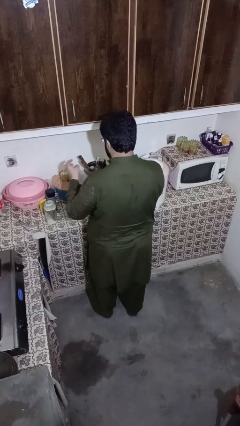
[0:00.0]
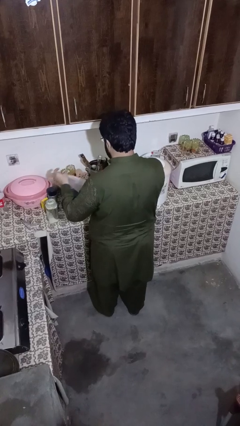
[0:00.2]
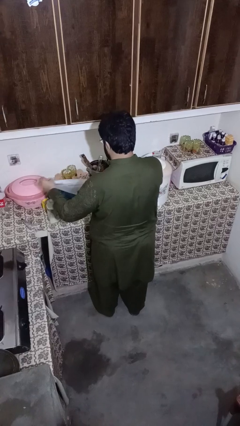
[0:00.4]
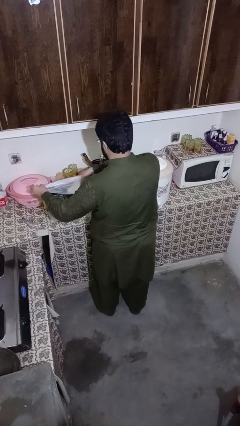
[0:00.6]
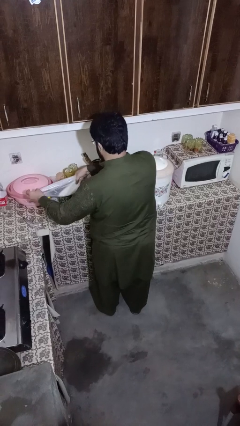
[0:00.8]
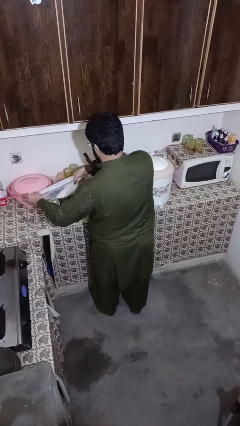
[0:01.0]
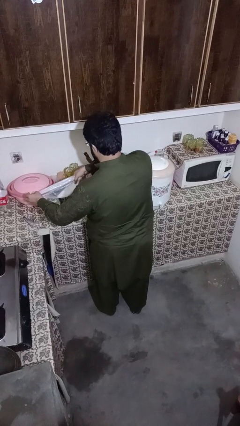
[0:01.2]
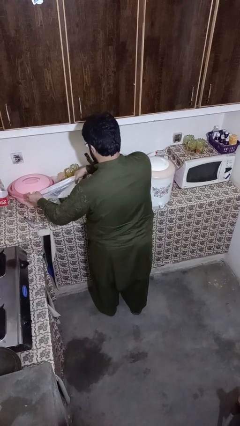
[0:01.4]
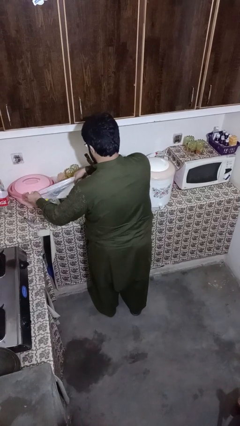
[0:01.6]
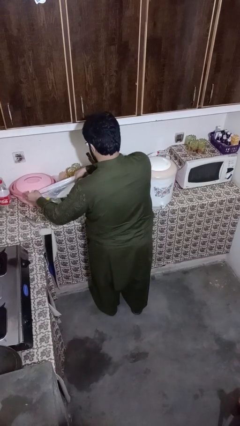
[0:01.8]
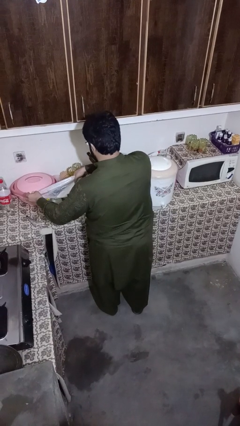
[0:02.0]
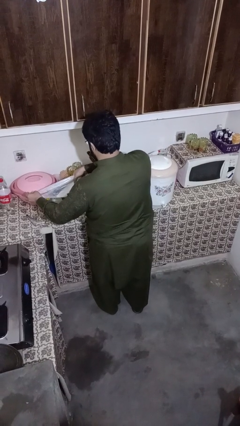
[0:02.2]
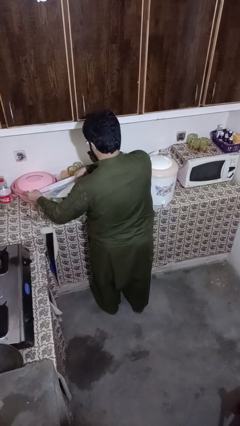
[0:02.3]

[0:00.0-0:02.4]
person pours into bowl

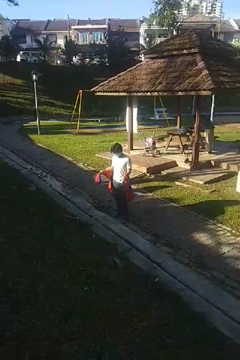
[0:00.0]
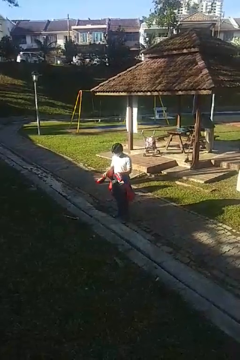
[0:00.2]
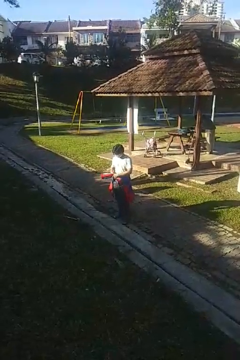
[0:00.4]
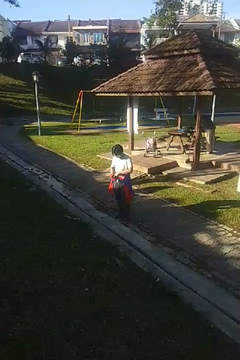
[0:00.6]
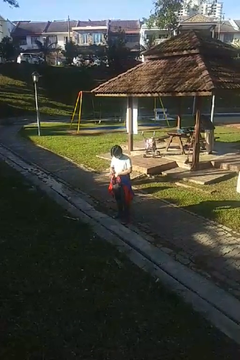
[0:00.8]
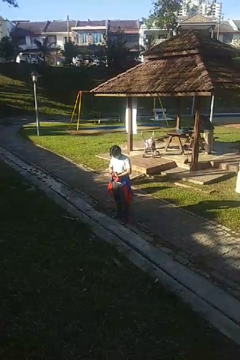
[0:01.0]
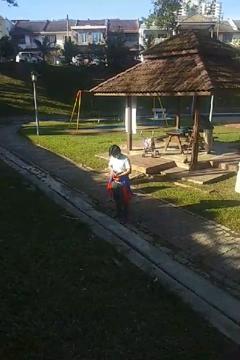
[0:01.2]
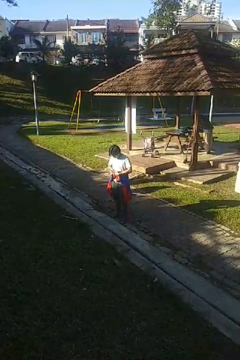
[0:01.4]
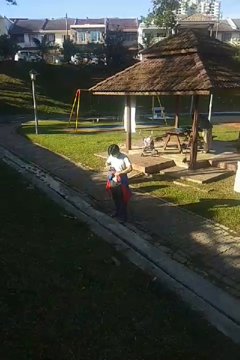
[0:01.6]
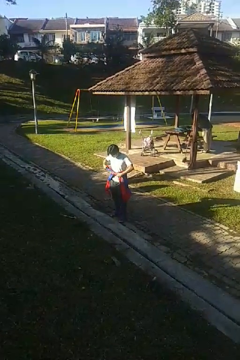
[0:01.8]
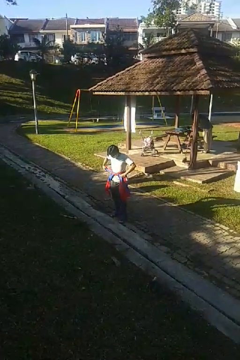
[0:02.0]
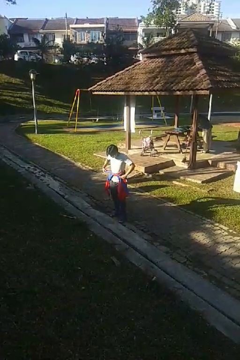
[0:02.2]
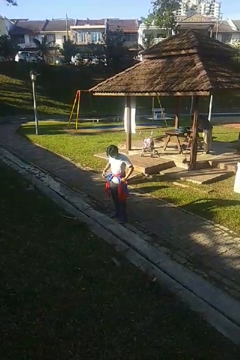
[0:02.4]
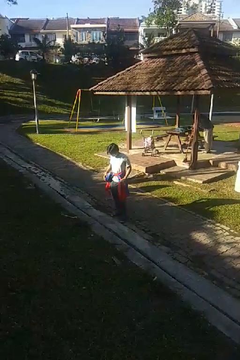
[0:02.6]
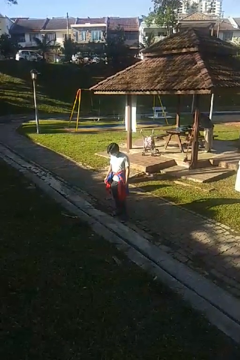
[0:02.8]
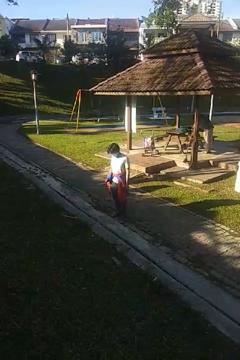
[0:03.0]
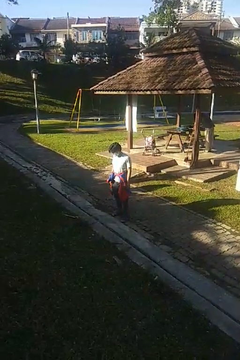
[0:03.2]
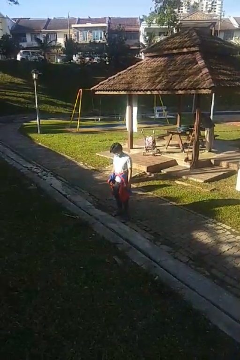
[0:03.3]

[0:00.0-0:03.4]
person ties jacket around waist

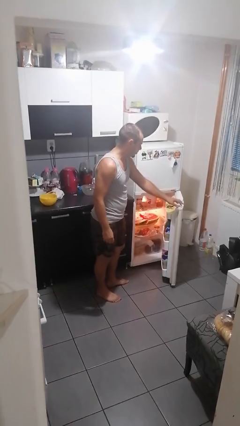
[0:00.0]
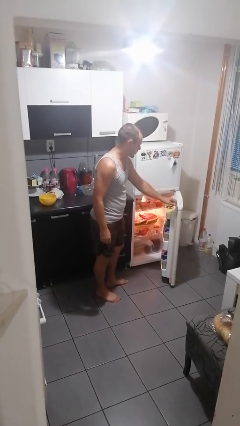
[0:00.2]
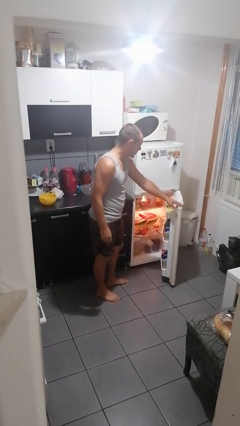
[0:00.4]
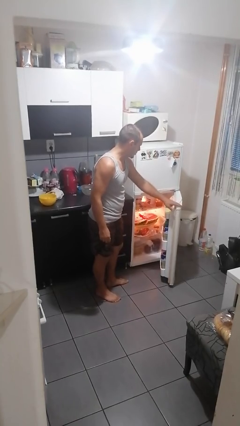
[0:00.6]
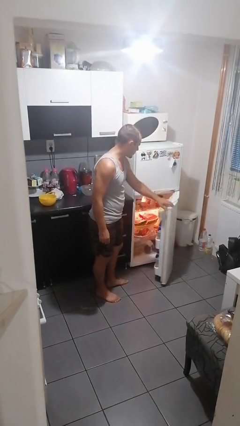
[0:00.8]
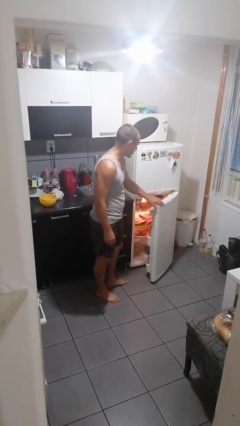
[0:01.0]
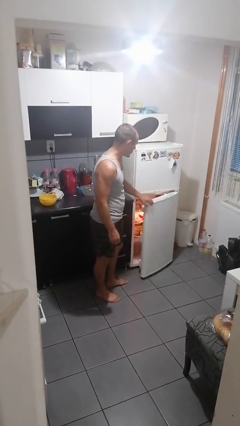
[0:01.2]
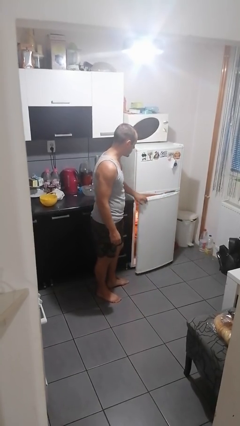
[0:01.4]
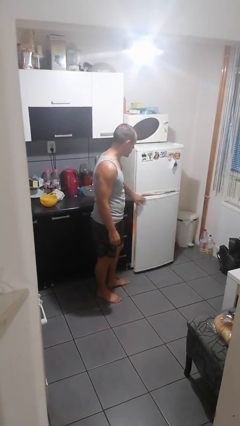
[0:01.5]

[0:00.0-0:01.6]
person closes refrigerator

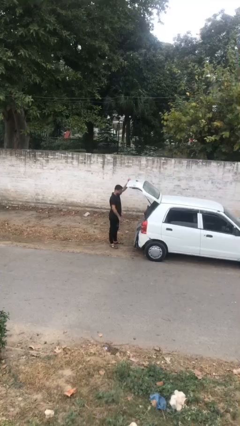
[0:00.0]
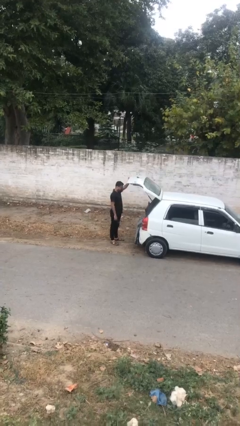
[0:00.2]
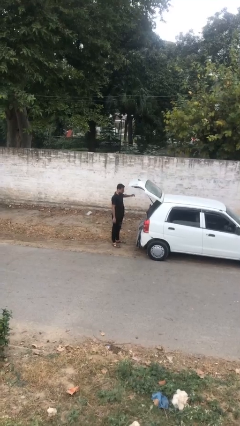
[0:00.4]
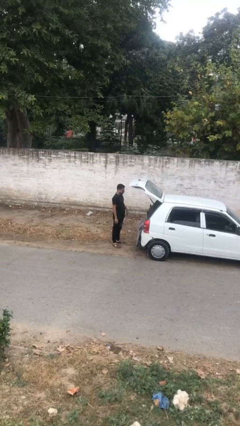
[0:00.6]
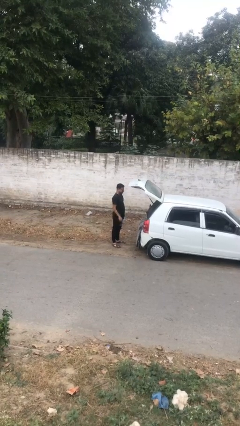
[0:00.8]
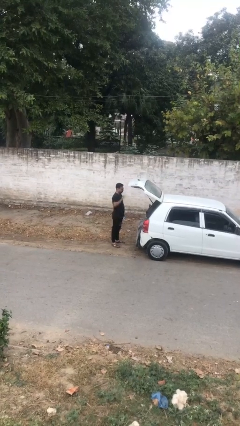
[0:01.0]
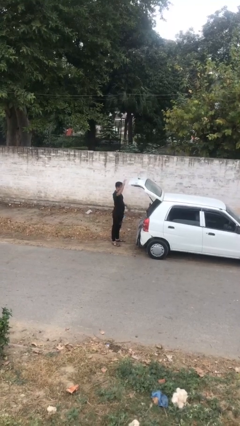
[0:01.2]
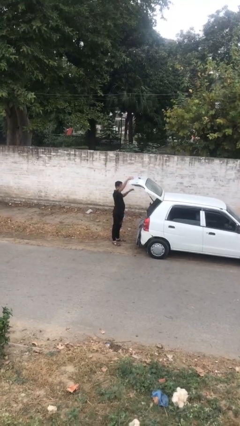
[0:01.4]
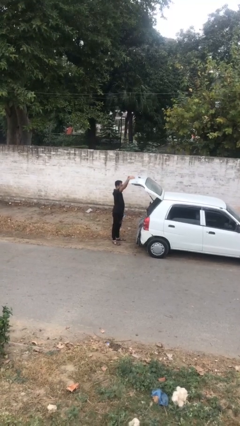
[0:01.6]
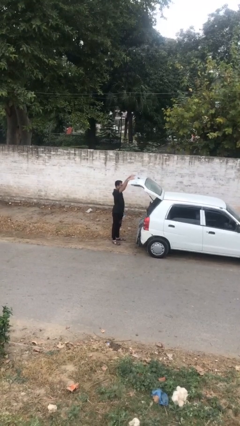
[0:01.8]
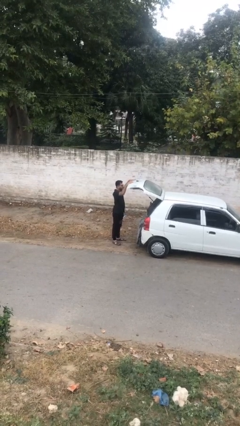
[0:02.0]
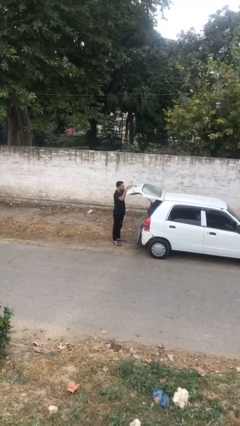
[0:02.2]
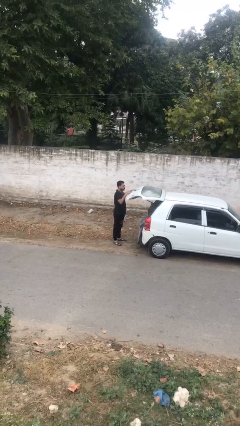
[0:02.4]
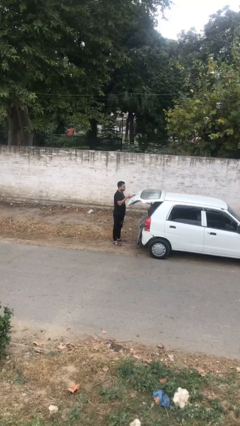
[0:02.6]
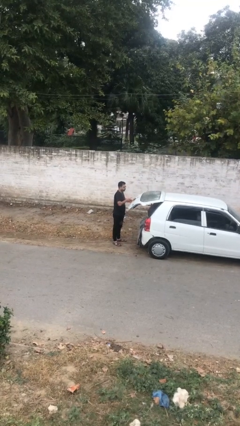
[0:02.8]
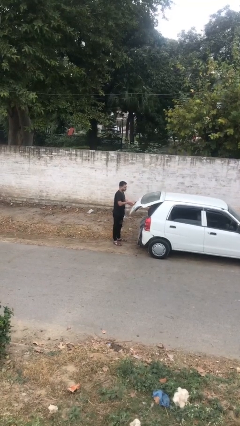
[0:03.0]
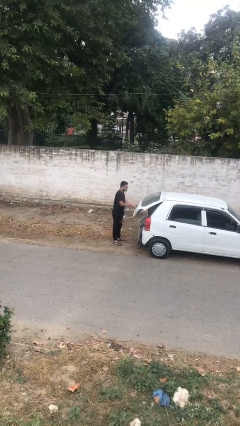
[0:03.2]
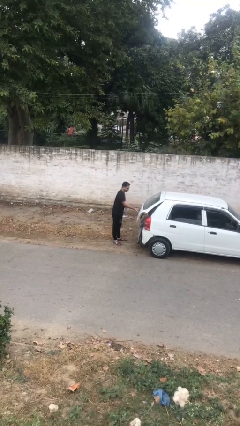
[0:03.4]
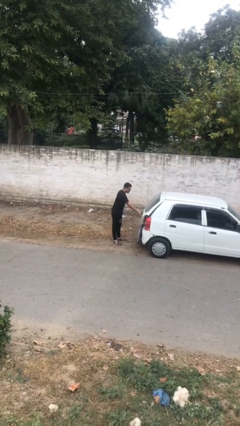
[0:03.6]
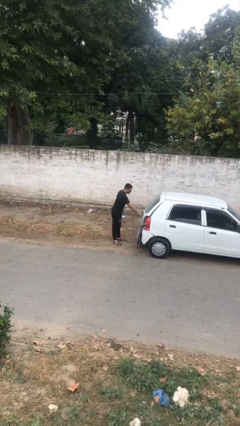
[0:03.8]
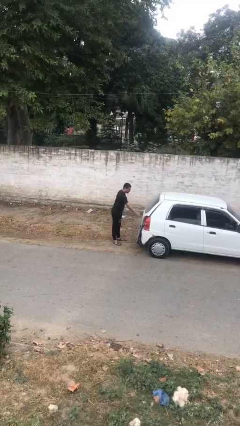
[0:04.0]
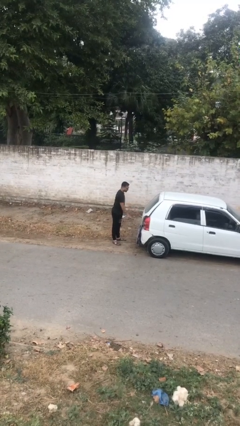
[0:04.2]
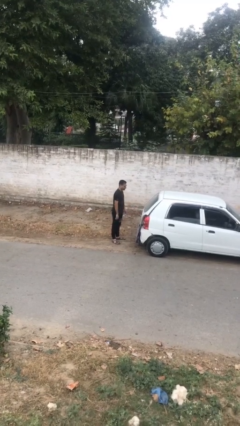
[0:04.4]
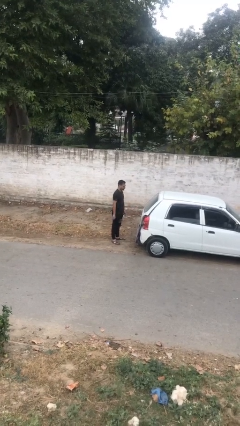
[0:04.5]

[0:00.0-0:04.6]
person closes car trunk

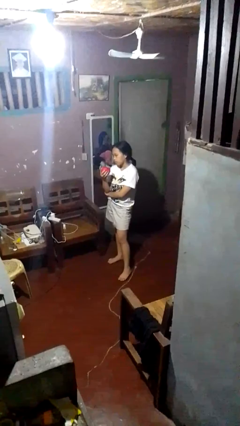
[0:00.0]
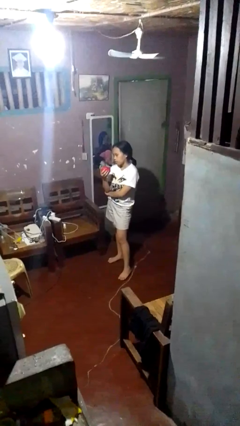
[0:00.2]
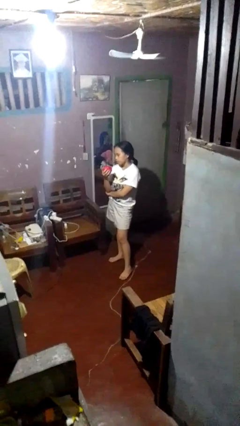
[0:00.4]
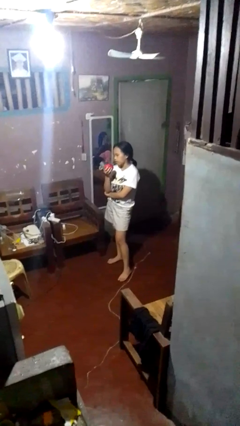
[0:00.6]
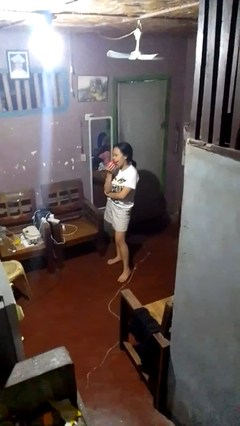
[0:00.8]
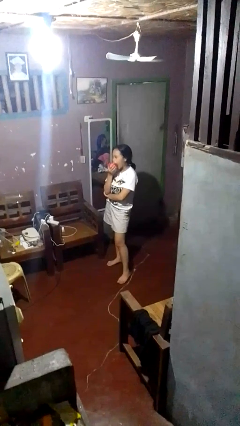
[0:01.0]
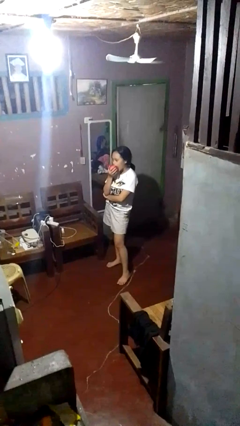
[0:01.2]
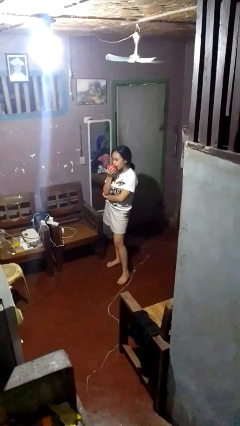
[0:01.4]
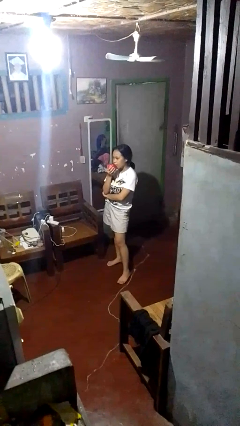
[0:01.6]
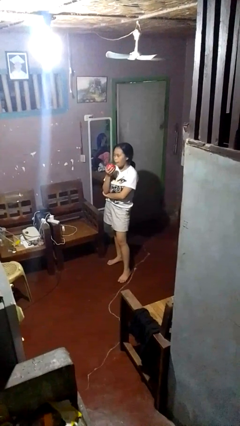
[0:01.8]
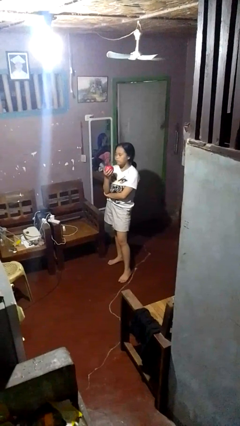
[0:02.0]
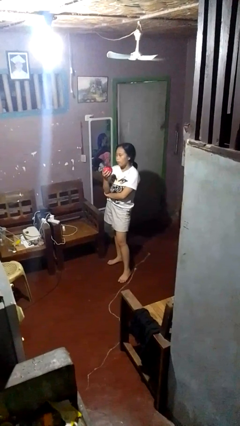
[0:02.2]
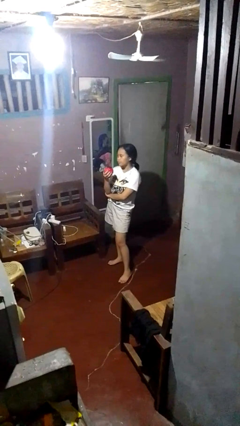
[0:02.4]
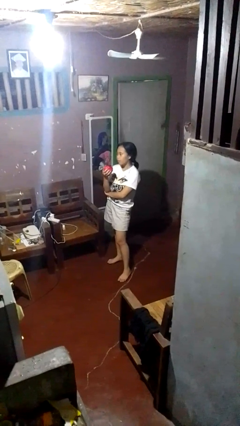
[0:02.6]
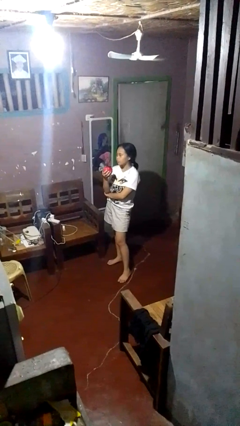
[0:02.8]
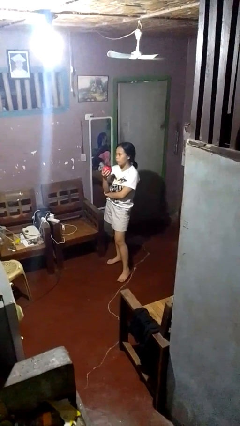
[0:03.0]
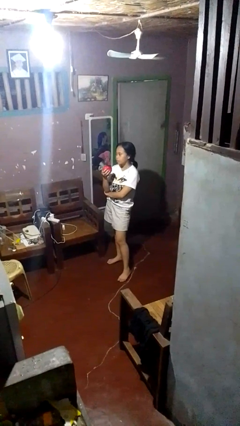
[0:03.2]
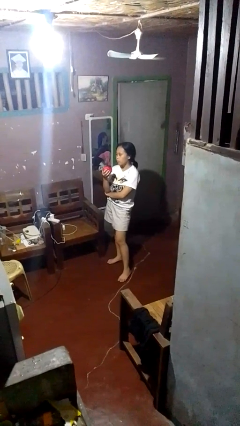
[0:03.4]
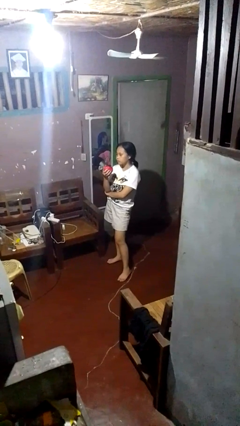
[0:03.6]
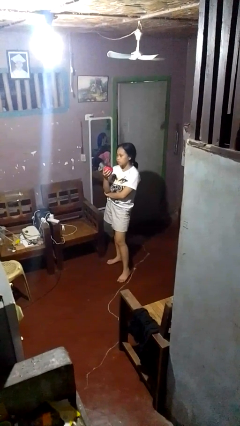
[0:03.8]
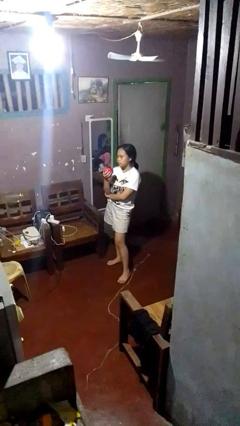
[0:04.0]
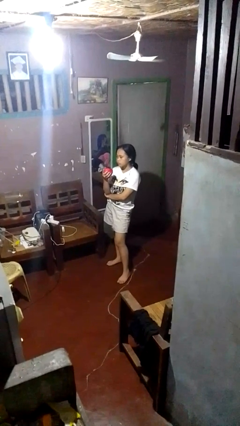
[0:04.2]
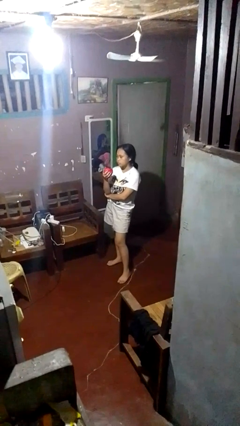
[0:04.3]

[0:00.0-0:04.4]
person eats apple

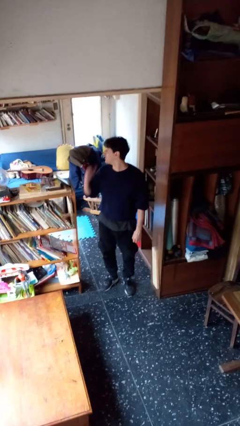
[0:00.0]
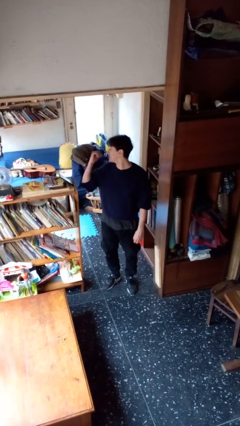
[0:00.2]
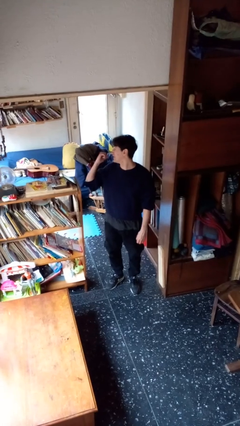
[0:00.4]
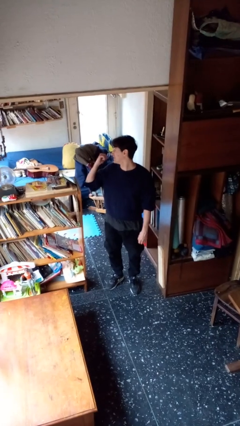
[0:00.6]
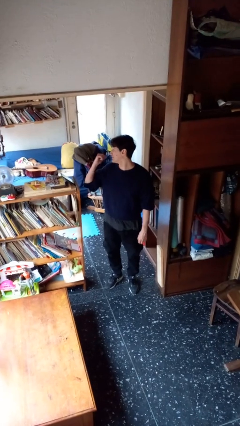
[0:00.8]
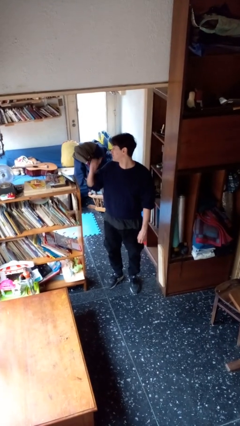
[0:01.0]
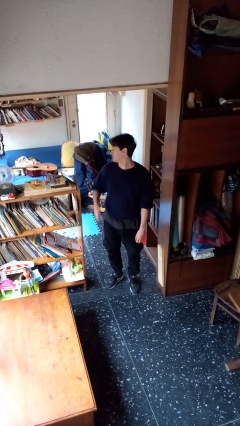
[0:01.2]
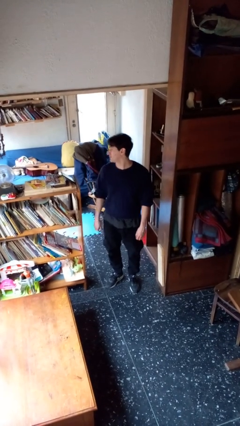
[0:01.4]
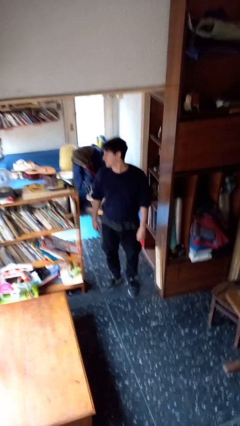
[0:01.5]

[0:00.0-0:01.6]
person gestures behind me
